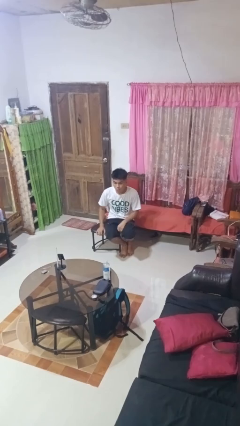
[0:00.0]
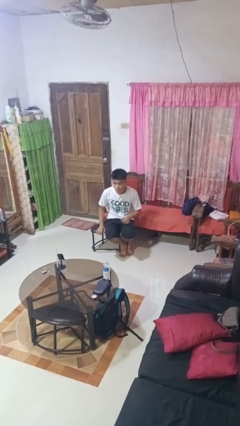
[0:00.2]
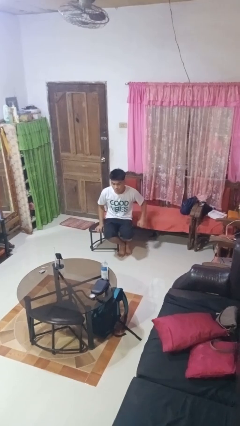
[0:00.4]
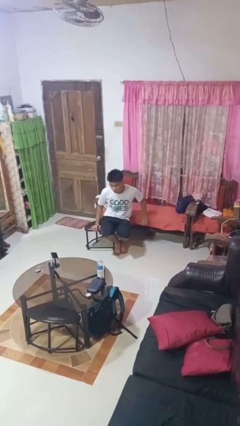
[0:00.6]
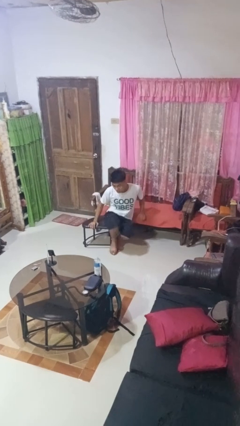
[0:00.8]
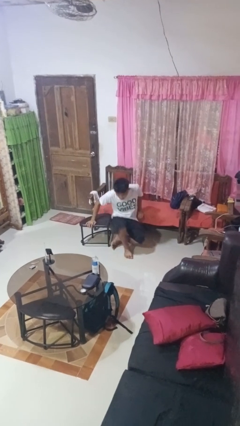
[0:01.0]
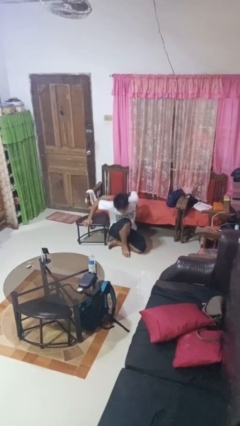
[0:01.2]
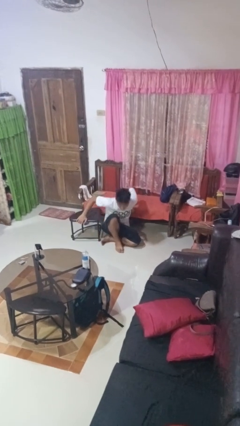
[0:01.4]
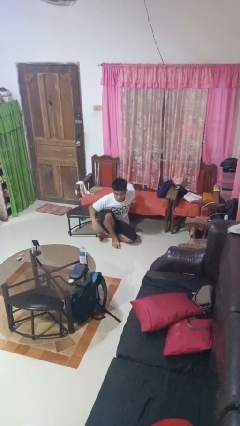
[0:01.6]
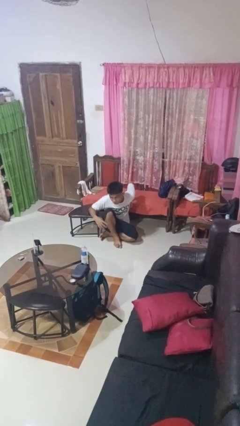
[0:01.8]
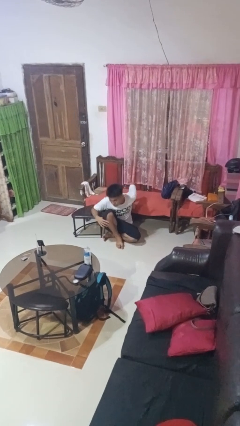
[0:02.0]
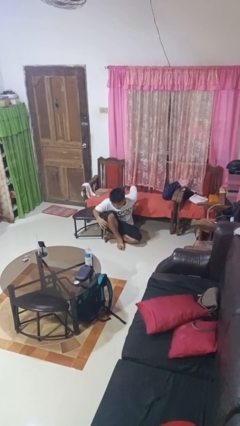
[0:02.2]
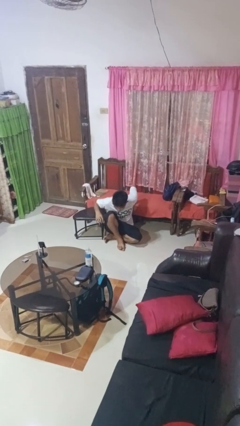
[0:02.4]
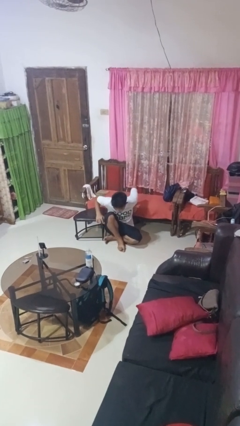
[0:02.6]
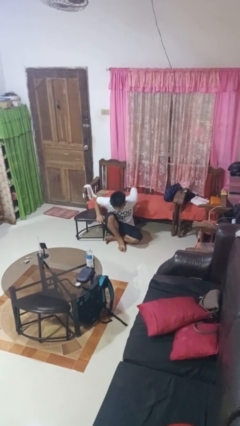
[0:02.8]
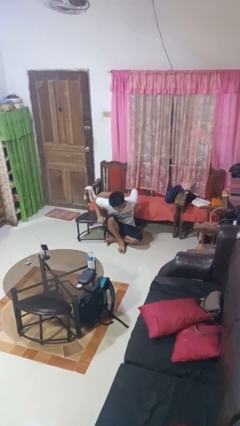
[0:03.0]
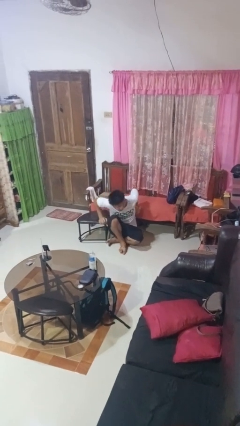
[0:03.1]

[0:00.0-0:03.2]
person falls from chair

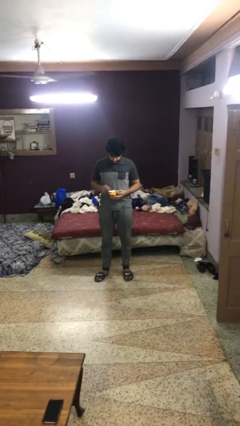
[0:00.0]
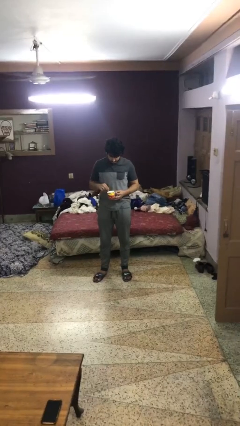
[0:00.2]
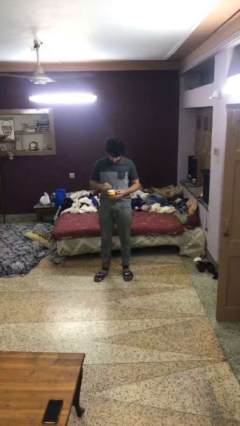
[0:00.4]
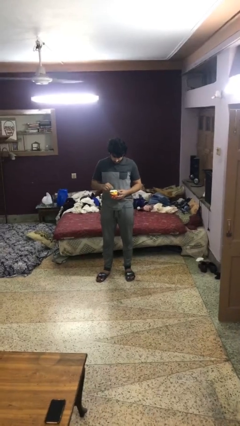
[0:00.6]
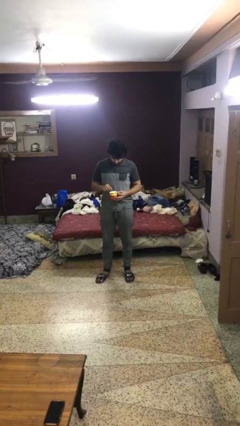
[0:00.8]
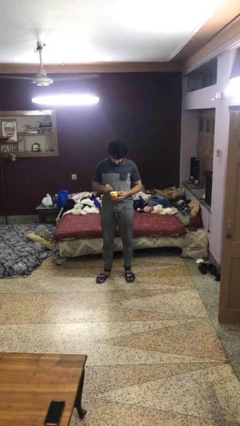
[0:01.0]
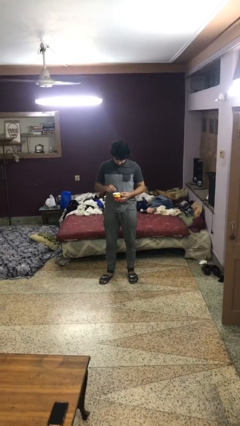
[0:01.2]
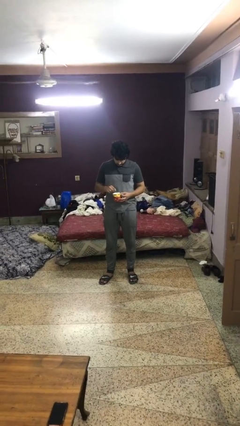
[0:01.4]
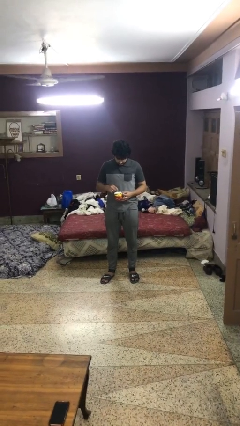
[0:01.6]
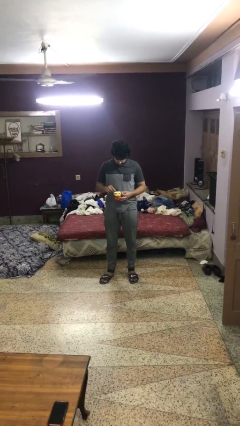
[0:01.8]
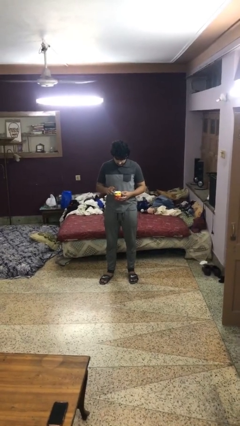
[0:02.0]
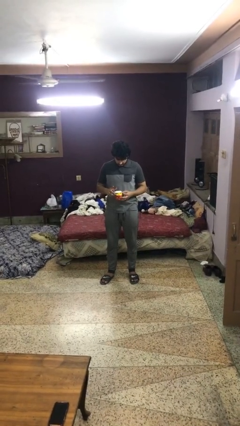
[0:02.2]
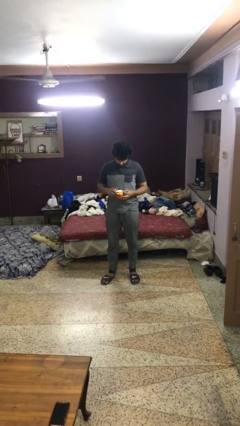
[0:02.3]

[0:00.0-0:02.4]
person stirs mug

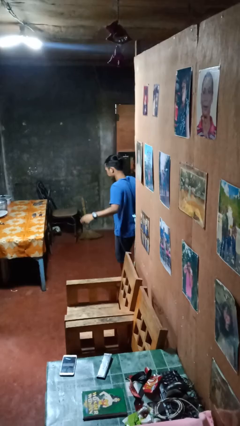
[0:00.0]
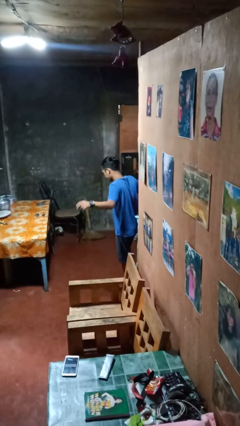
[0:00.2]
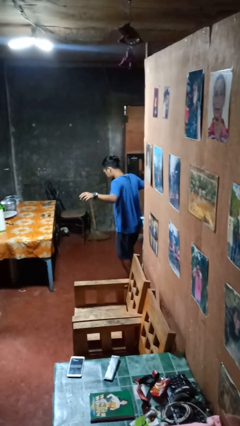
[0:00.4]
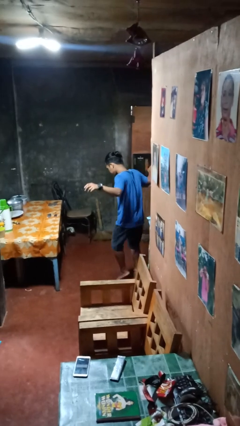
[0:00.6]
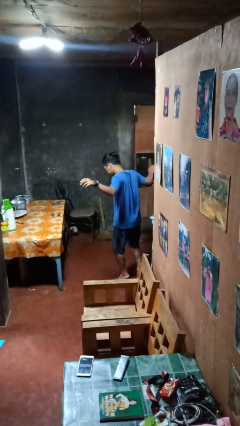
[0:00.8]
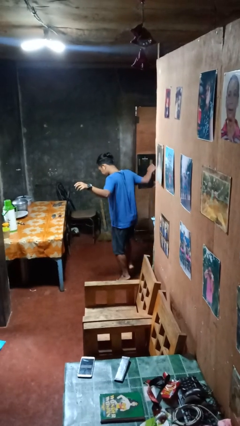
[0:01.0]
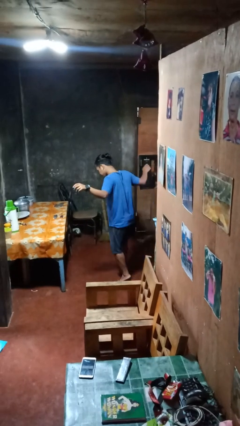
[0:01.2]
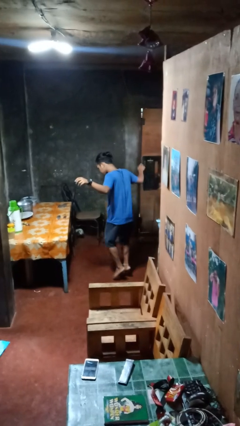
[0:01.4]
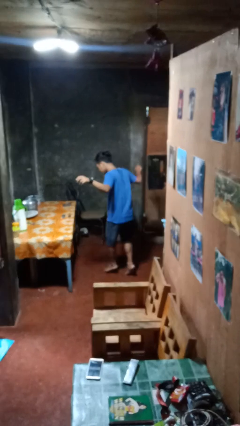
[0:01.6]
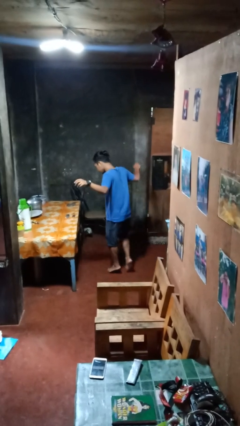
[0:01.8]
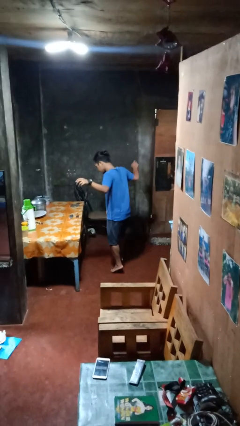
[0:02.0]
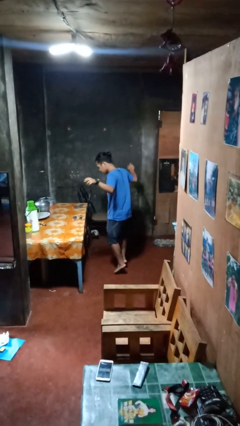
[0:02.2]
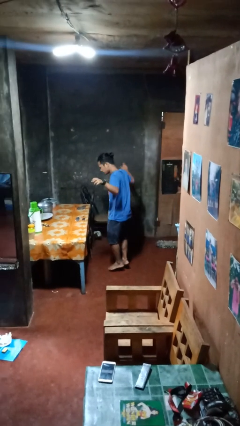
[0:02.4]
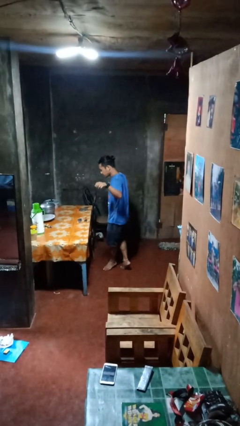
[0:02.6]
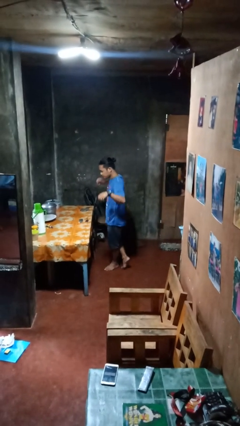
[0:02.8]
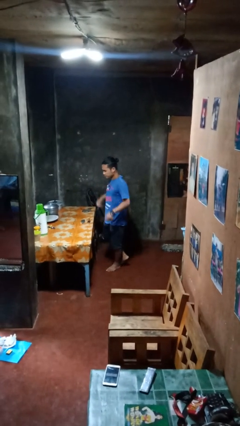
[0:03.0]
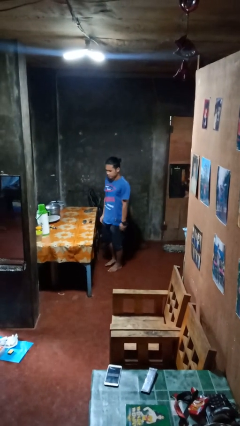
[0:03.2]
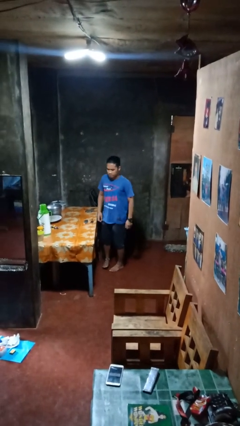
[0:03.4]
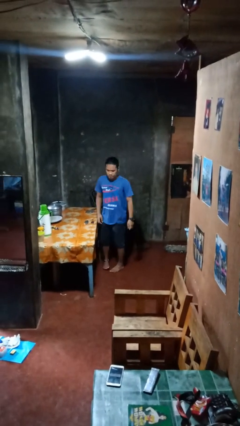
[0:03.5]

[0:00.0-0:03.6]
person walks tiptoe

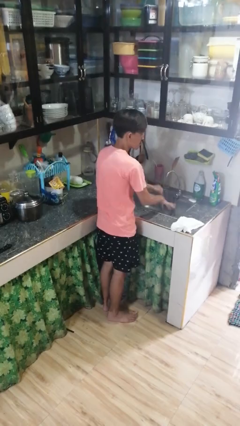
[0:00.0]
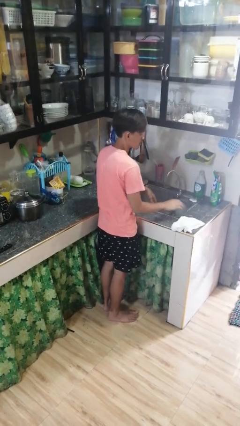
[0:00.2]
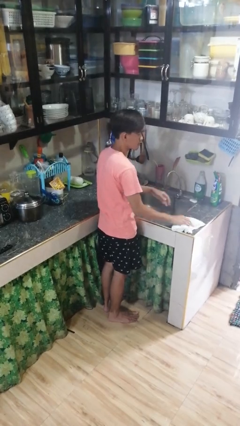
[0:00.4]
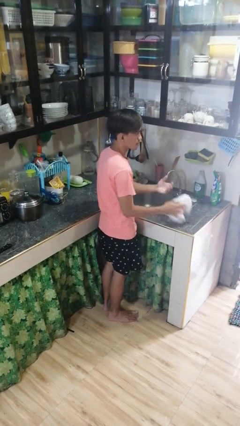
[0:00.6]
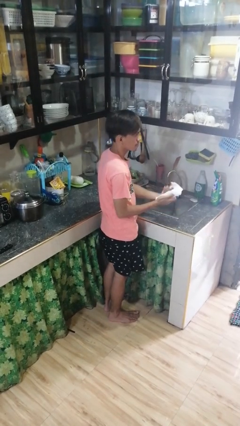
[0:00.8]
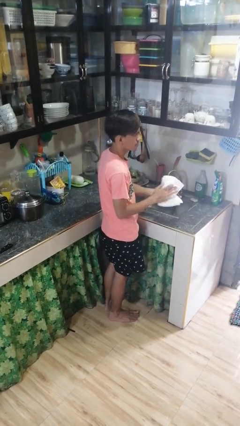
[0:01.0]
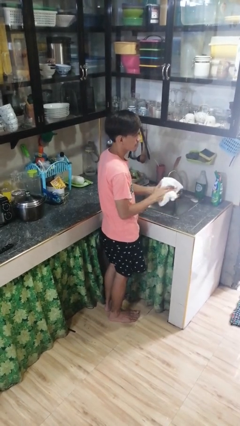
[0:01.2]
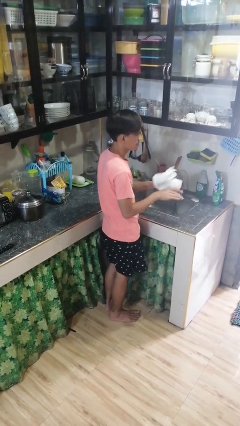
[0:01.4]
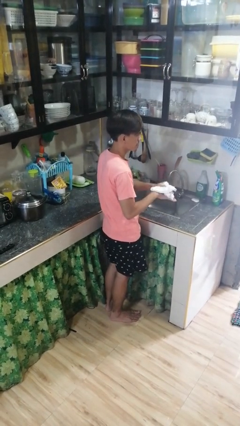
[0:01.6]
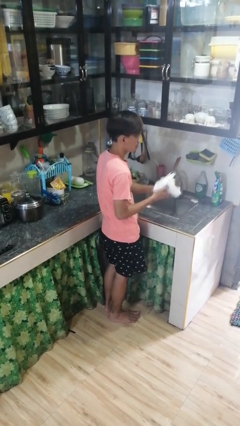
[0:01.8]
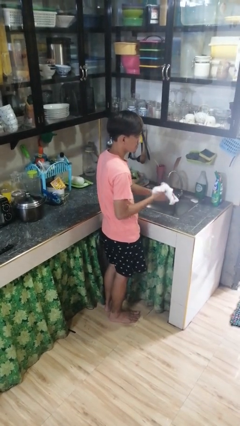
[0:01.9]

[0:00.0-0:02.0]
person dries hands with towel

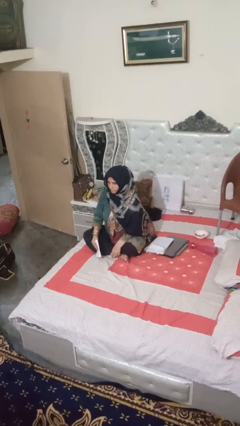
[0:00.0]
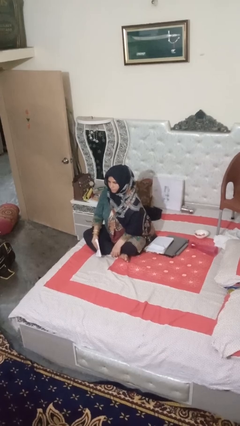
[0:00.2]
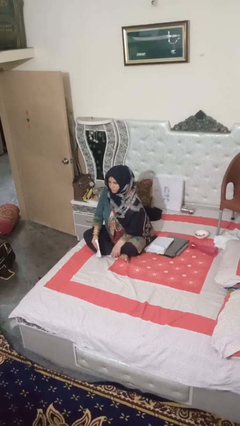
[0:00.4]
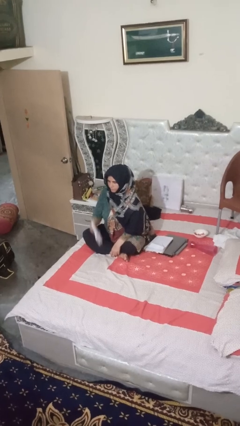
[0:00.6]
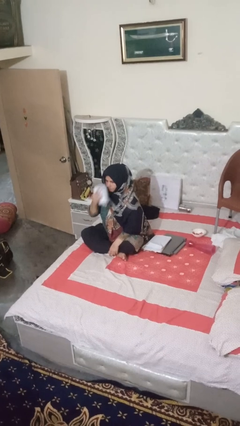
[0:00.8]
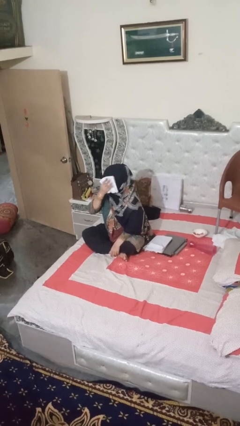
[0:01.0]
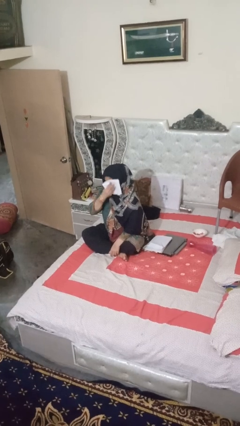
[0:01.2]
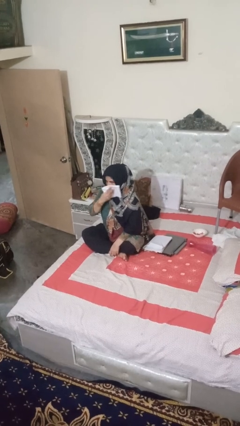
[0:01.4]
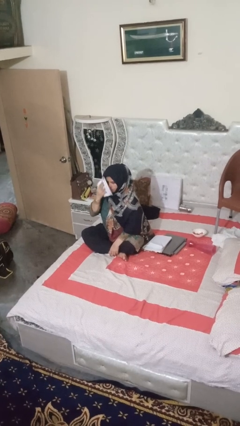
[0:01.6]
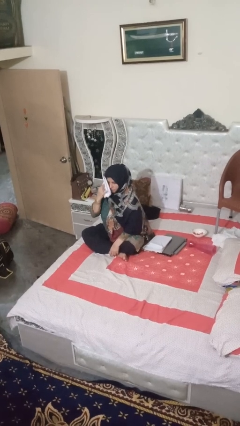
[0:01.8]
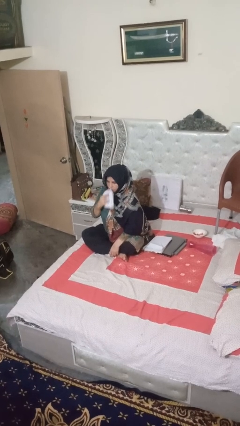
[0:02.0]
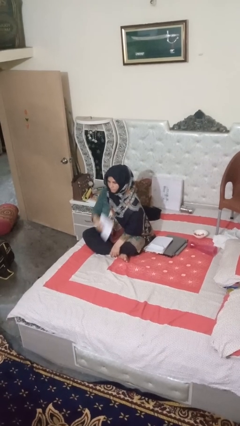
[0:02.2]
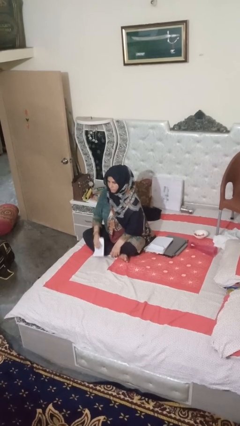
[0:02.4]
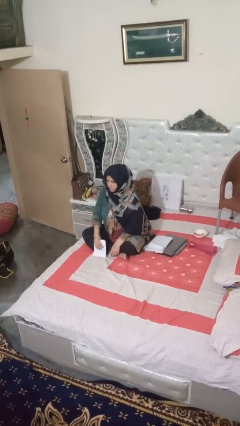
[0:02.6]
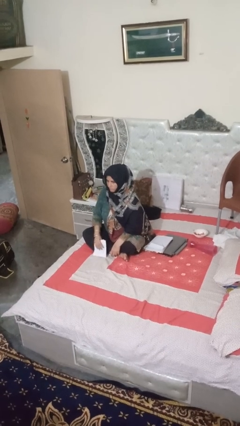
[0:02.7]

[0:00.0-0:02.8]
person wipes mouth with napkin

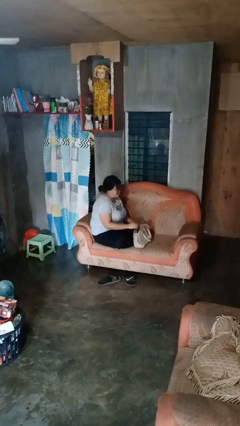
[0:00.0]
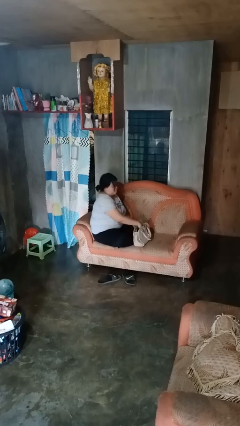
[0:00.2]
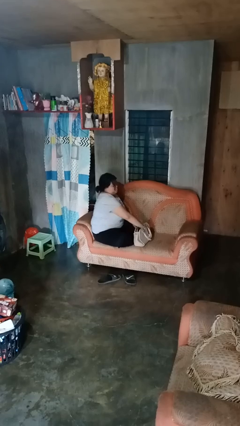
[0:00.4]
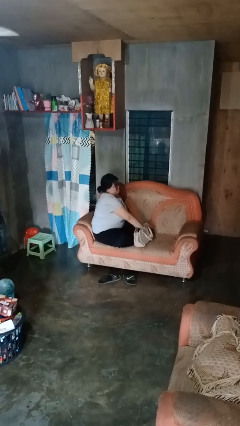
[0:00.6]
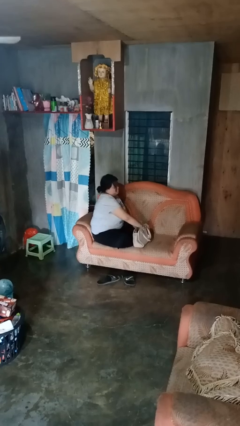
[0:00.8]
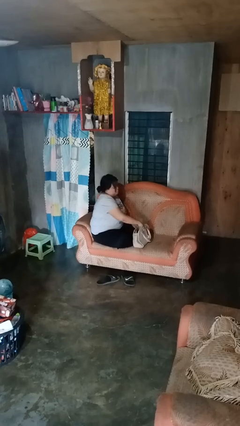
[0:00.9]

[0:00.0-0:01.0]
person takes object from purse

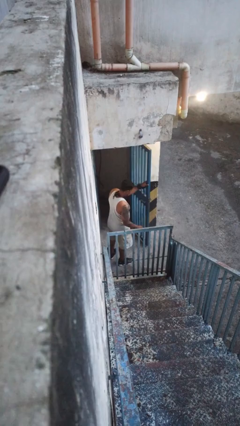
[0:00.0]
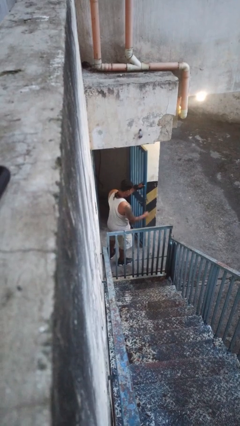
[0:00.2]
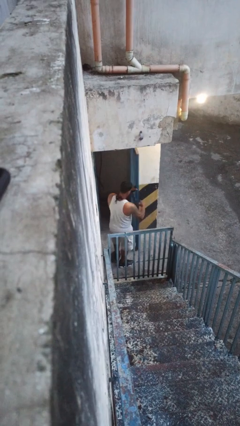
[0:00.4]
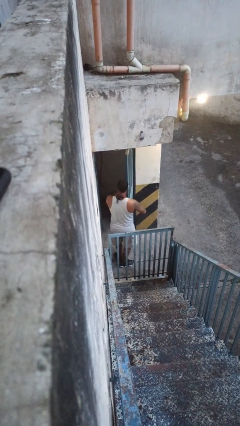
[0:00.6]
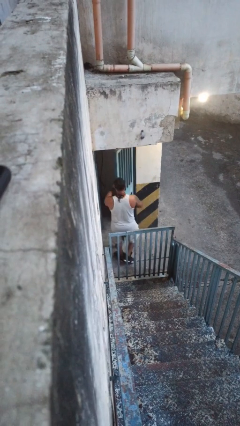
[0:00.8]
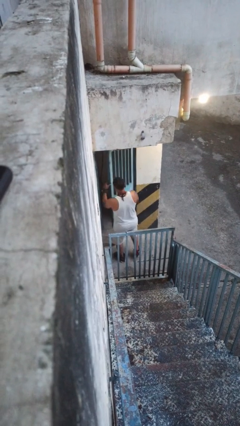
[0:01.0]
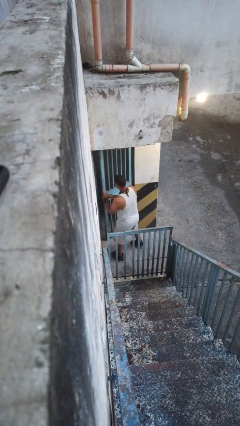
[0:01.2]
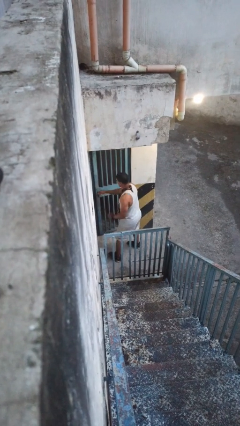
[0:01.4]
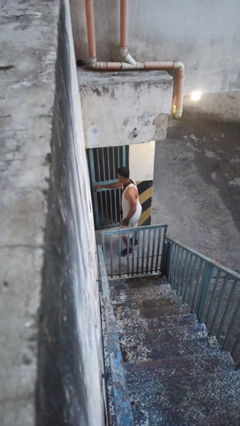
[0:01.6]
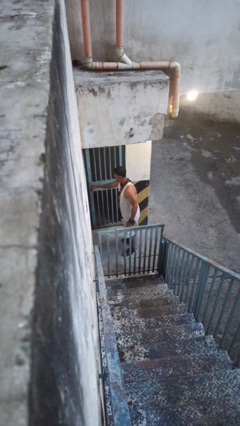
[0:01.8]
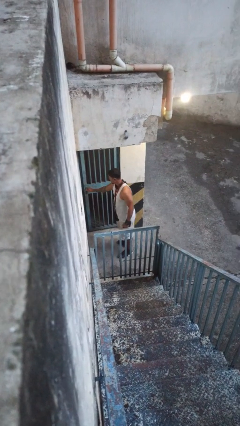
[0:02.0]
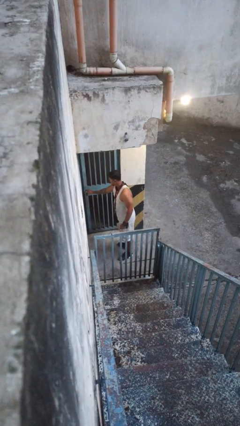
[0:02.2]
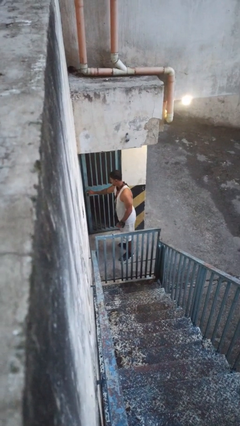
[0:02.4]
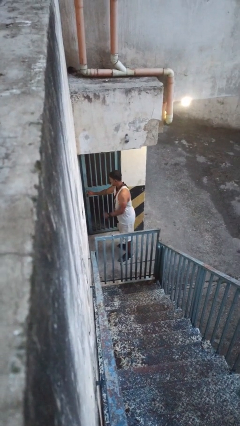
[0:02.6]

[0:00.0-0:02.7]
person closes facility door
